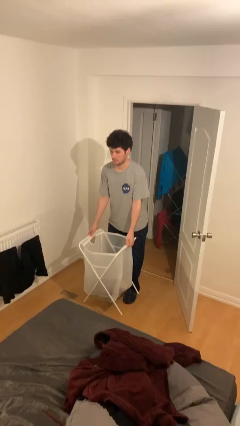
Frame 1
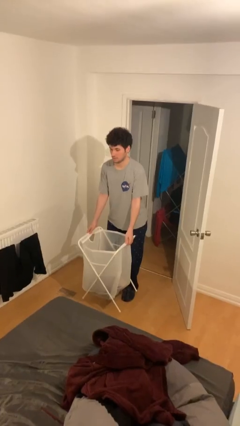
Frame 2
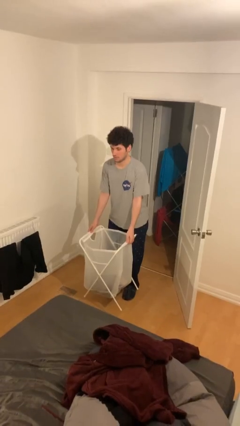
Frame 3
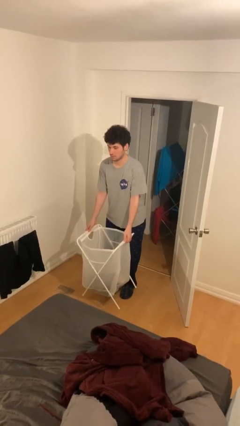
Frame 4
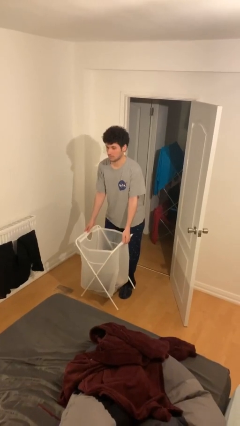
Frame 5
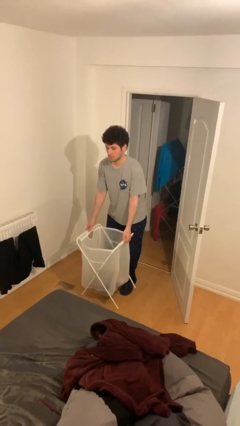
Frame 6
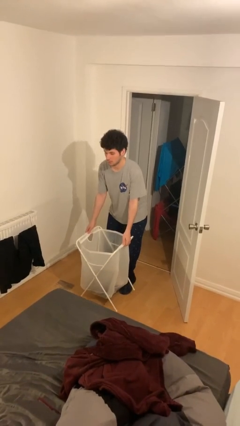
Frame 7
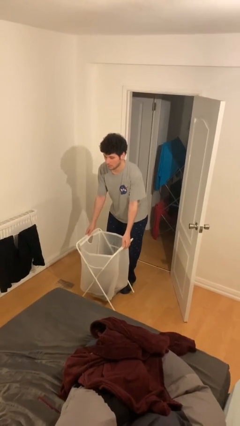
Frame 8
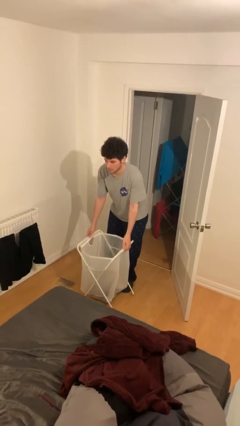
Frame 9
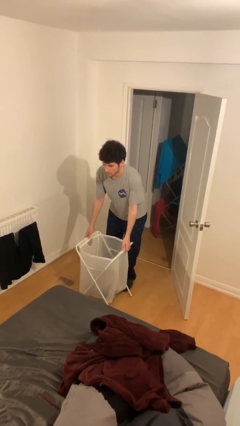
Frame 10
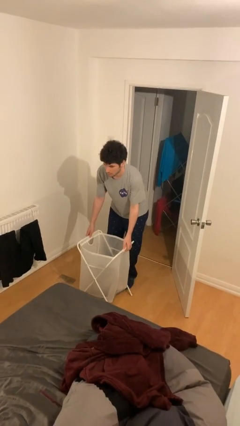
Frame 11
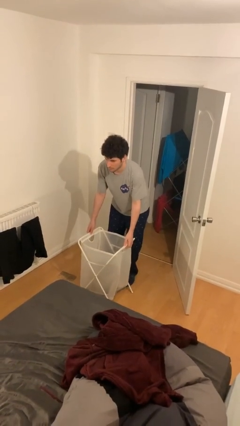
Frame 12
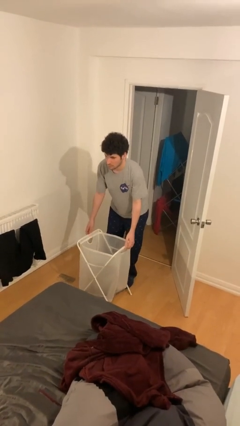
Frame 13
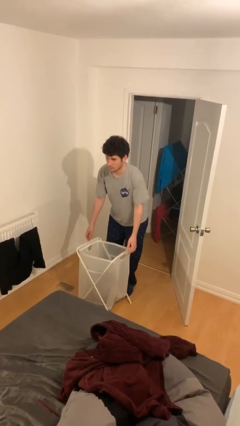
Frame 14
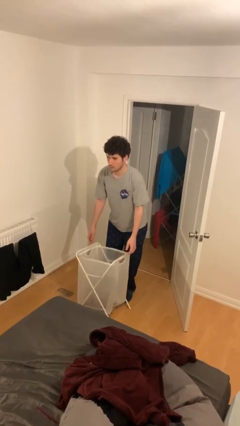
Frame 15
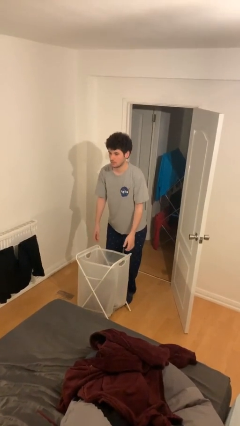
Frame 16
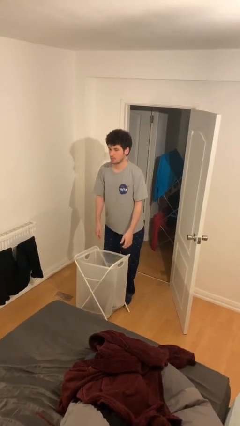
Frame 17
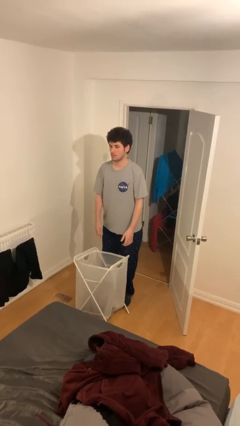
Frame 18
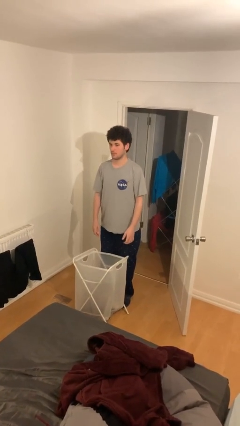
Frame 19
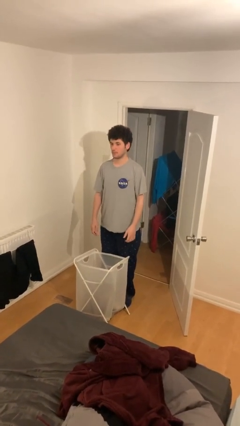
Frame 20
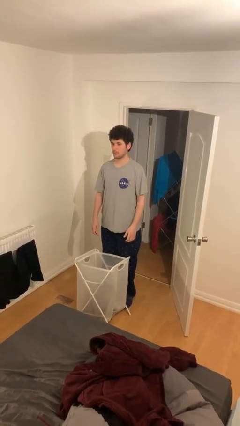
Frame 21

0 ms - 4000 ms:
person puts down object on floor

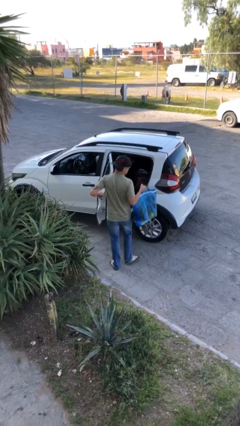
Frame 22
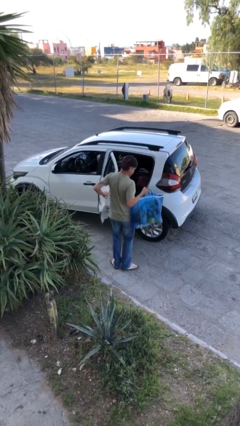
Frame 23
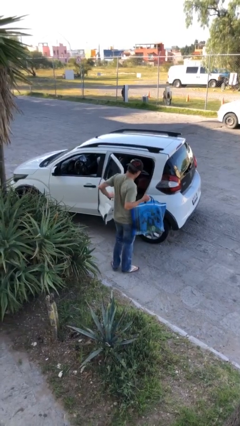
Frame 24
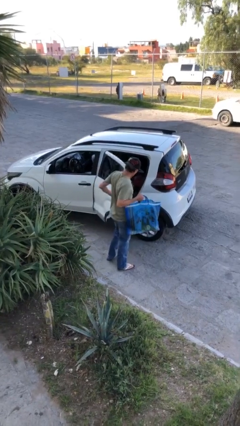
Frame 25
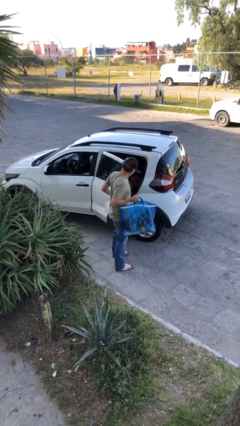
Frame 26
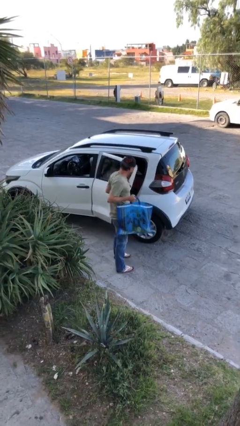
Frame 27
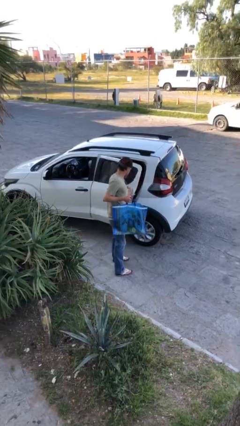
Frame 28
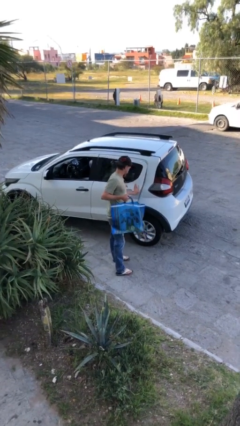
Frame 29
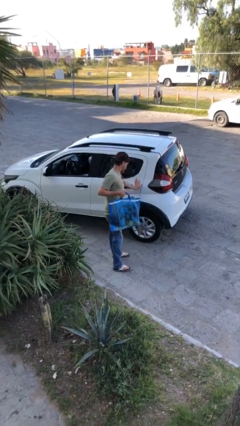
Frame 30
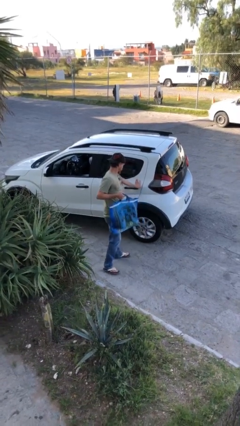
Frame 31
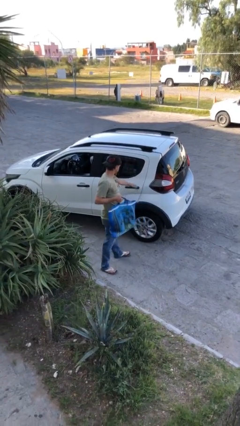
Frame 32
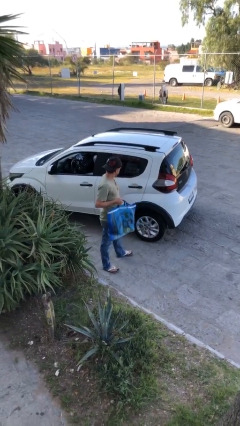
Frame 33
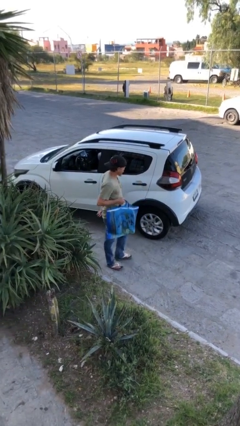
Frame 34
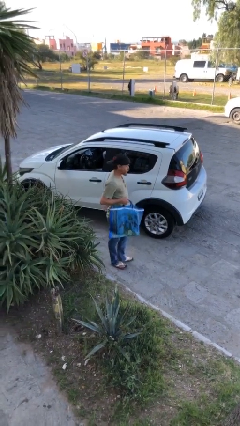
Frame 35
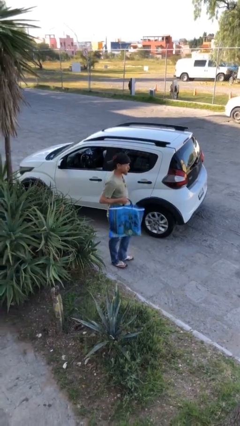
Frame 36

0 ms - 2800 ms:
person closes car door

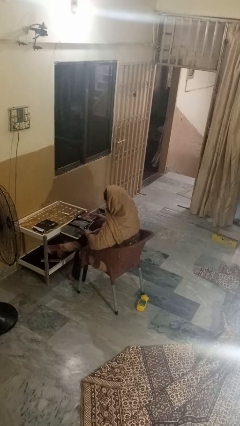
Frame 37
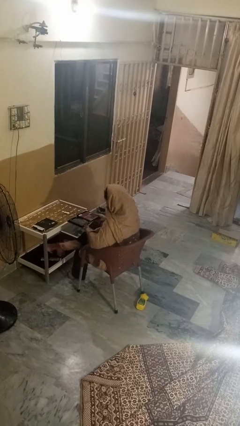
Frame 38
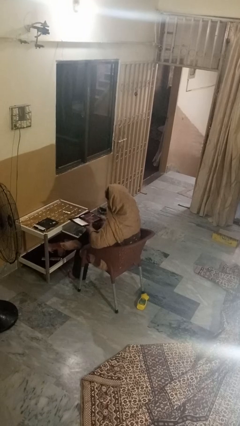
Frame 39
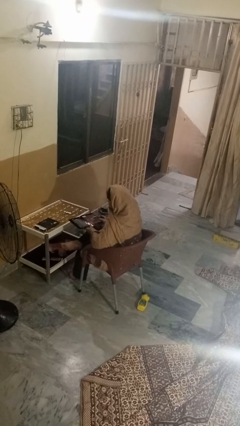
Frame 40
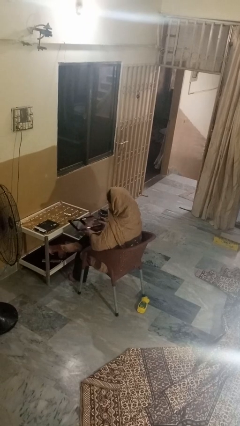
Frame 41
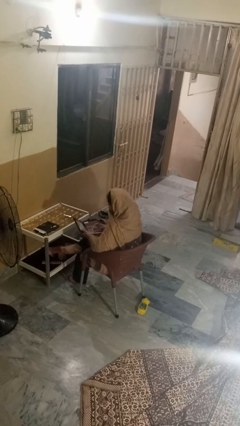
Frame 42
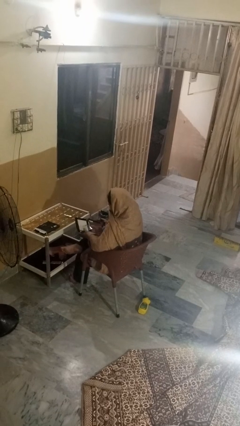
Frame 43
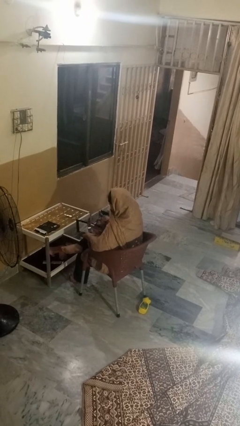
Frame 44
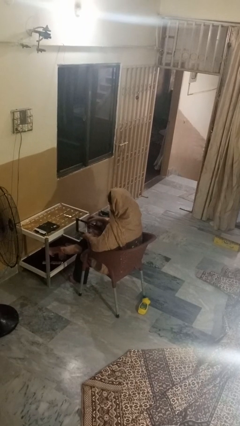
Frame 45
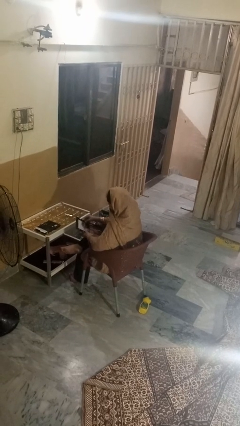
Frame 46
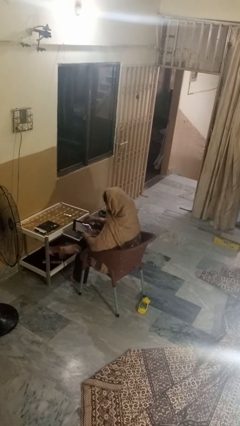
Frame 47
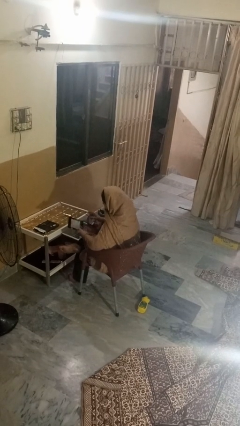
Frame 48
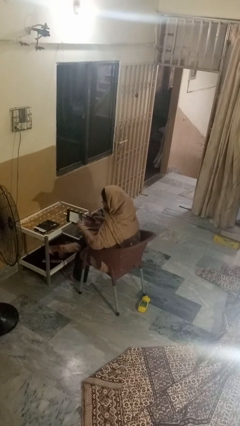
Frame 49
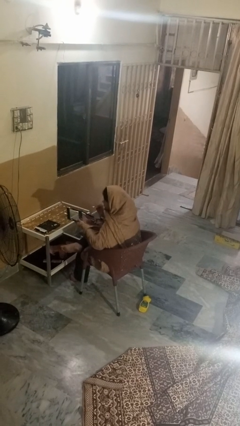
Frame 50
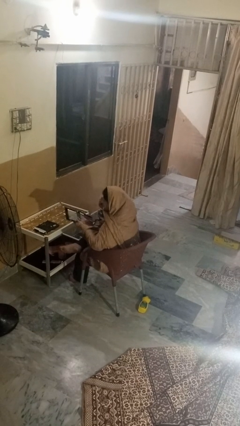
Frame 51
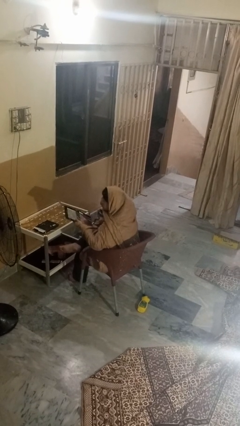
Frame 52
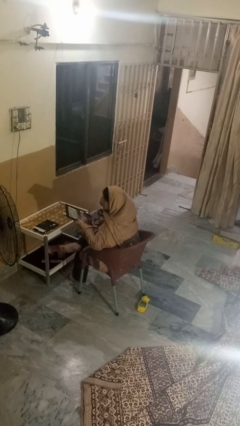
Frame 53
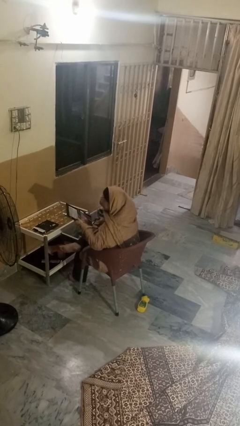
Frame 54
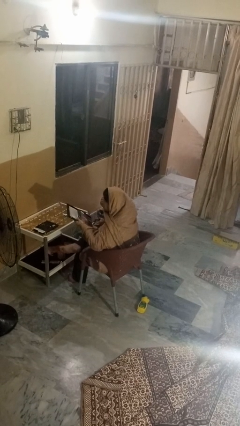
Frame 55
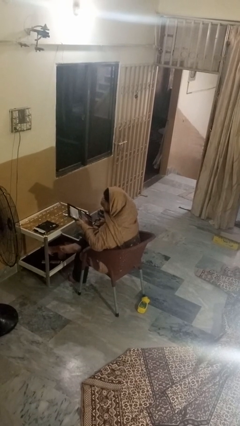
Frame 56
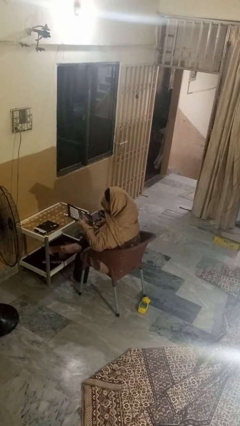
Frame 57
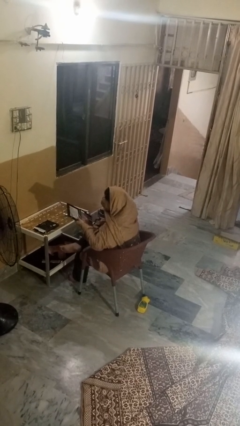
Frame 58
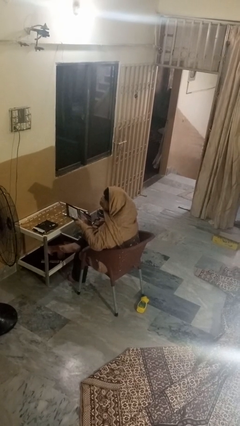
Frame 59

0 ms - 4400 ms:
person applies eye makeup

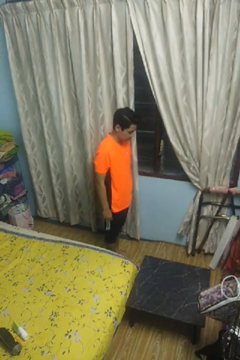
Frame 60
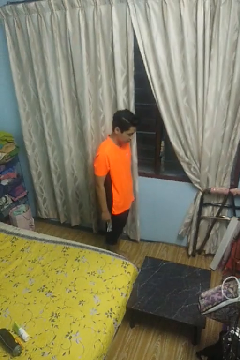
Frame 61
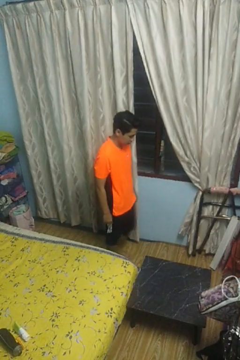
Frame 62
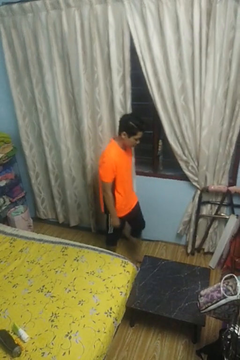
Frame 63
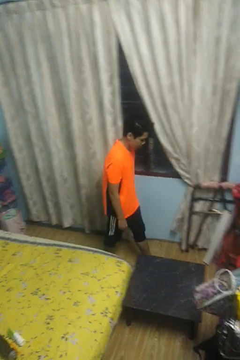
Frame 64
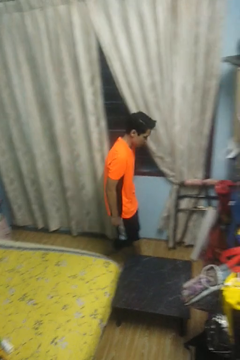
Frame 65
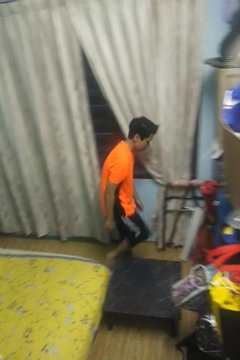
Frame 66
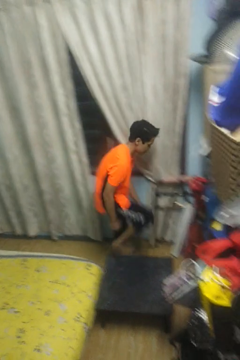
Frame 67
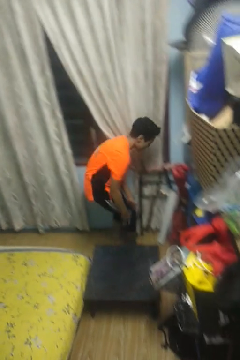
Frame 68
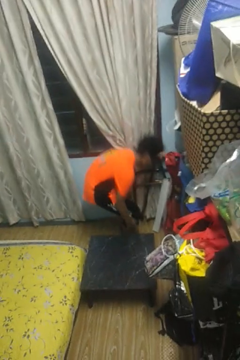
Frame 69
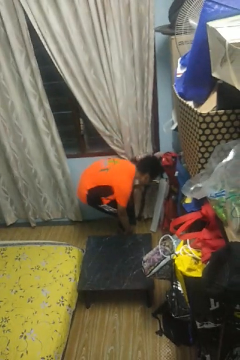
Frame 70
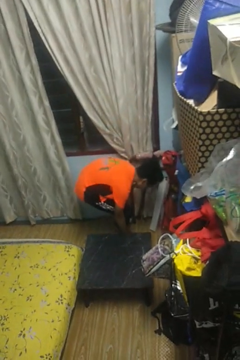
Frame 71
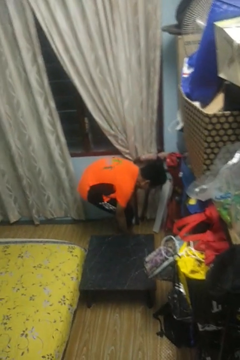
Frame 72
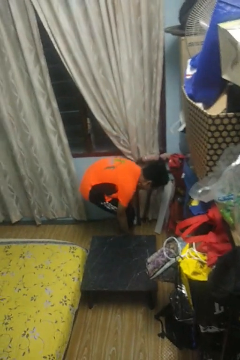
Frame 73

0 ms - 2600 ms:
person bumps into table

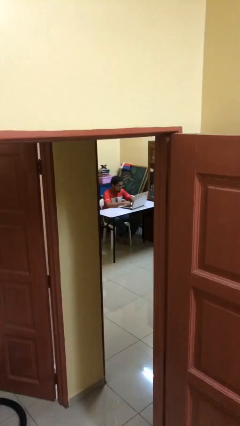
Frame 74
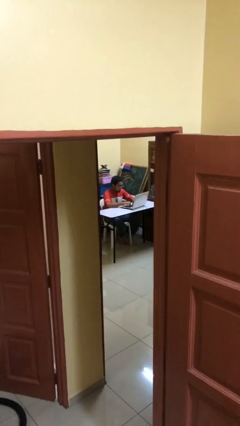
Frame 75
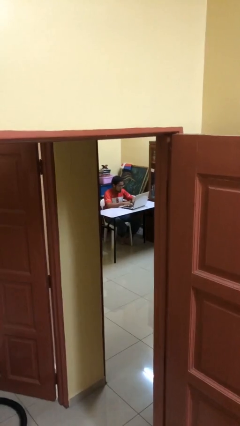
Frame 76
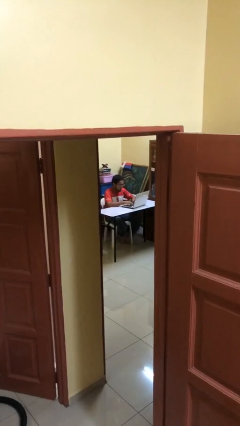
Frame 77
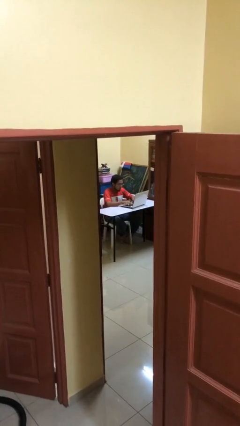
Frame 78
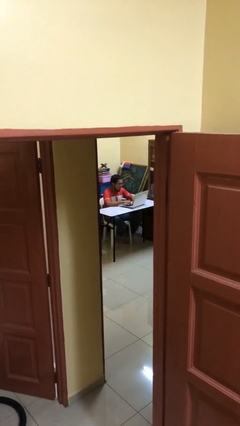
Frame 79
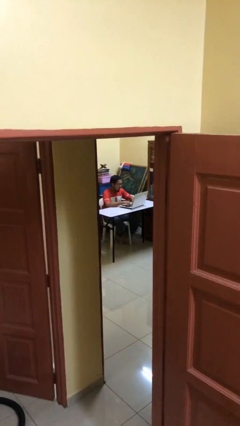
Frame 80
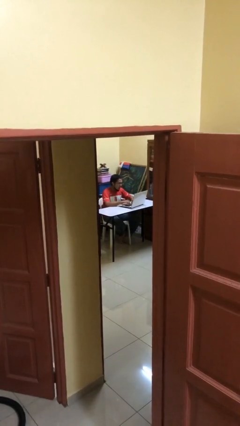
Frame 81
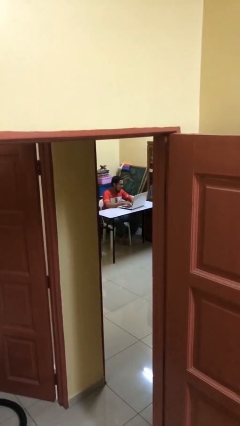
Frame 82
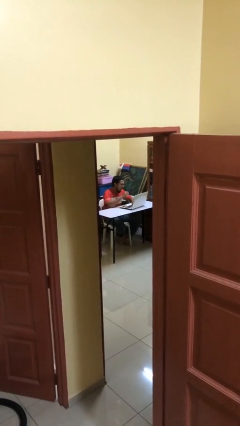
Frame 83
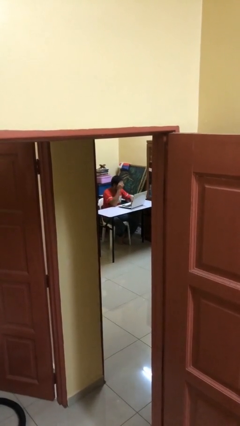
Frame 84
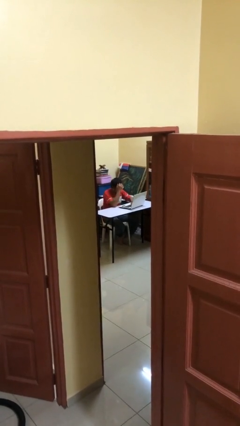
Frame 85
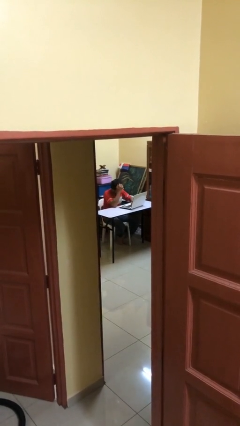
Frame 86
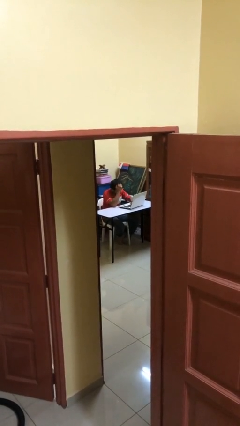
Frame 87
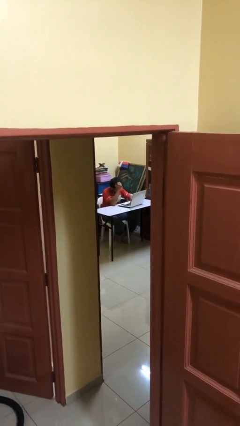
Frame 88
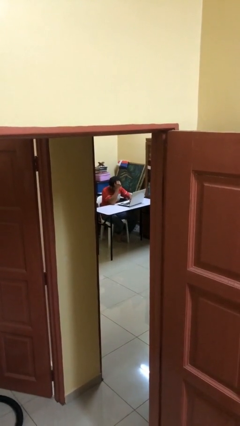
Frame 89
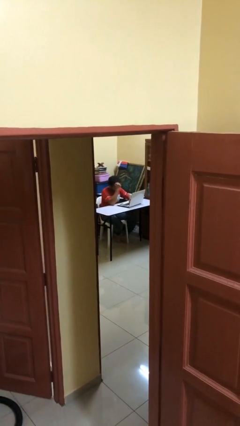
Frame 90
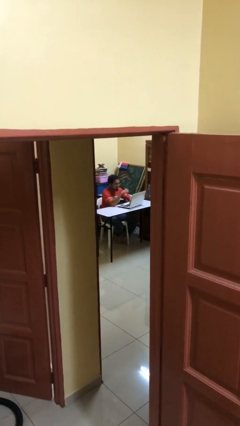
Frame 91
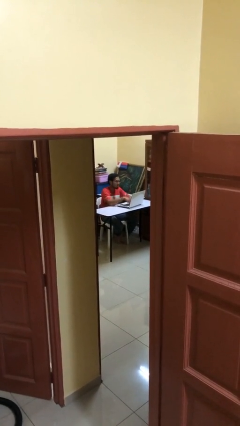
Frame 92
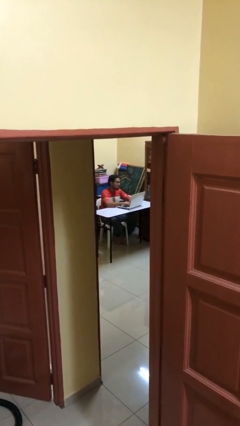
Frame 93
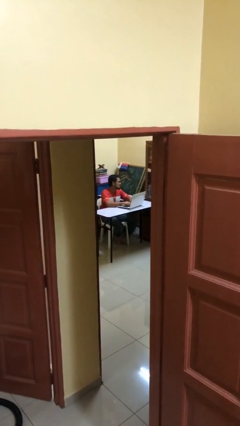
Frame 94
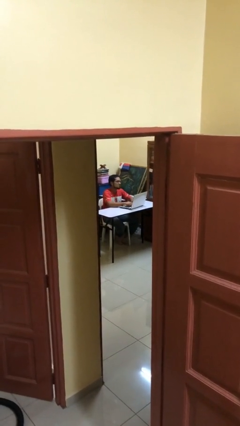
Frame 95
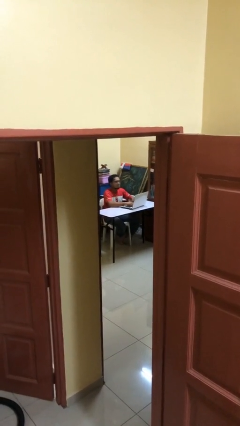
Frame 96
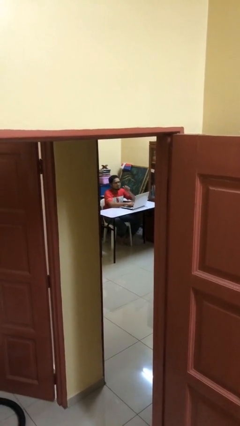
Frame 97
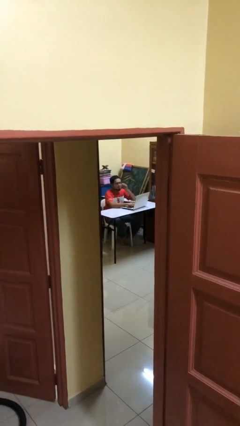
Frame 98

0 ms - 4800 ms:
person interacts with laptop
